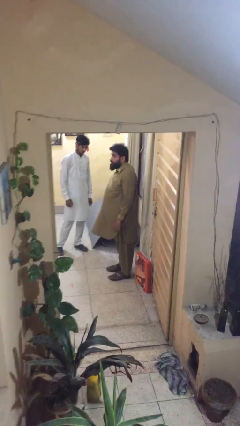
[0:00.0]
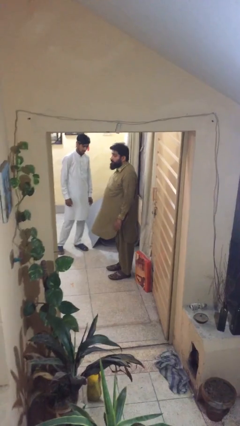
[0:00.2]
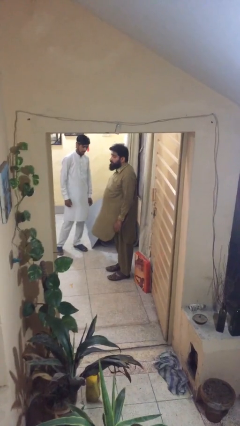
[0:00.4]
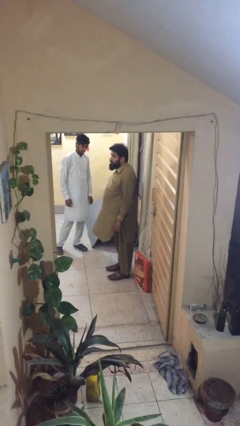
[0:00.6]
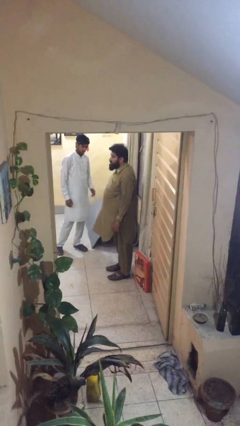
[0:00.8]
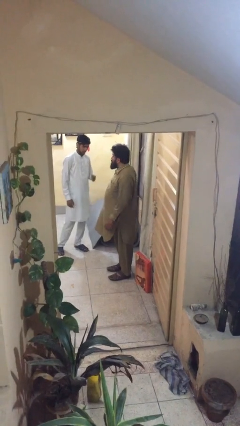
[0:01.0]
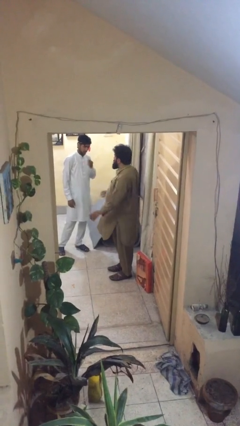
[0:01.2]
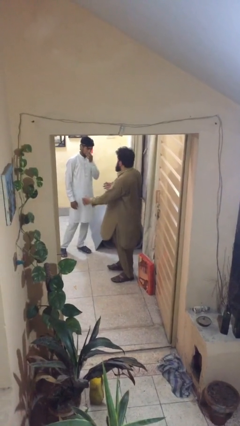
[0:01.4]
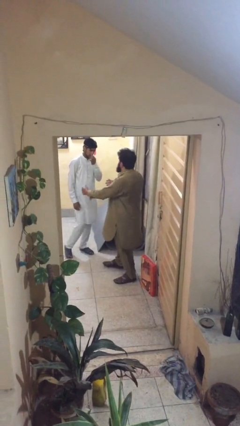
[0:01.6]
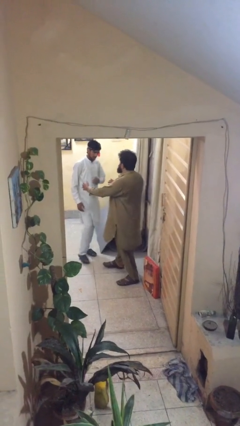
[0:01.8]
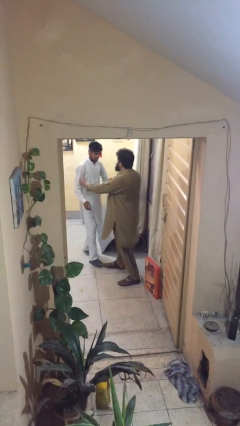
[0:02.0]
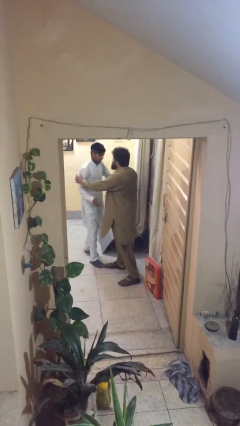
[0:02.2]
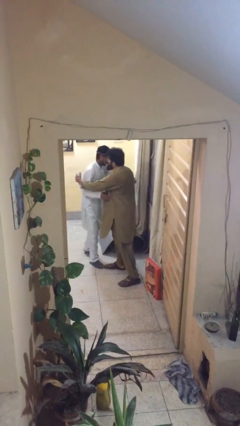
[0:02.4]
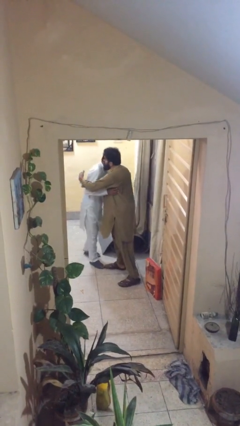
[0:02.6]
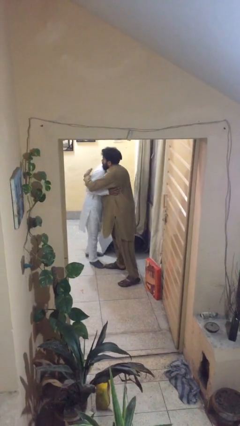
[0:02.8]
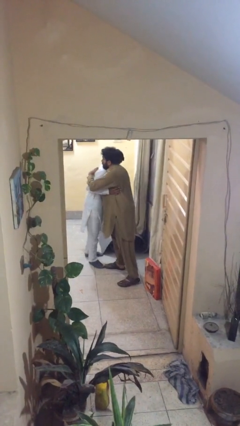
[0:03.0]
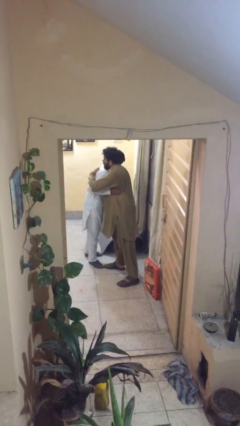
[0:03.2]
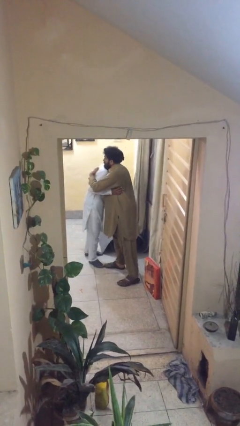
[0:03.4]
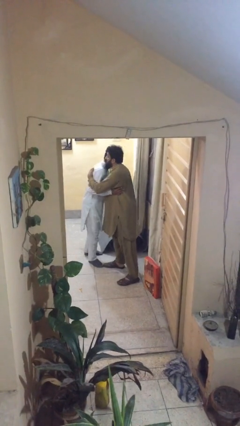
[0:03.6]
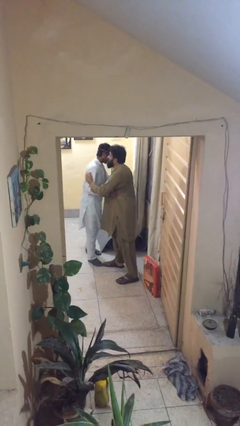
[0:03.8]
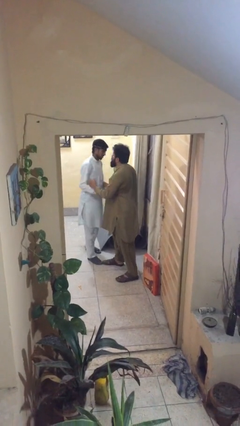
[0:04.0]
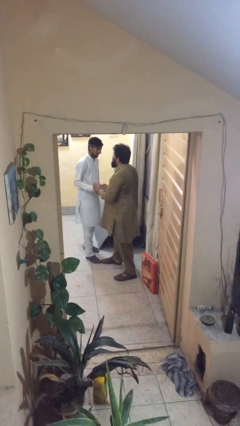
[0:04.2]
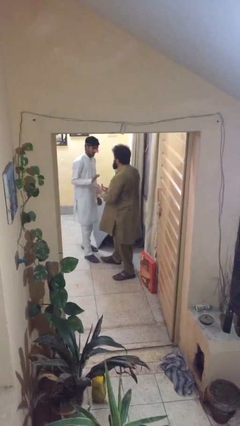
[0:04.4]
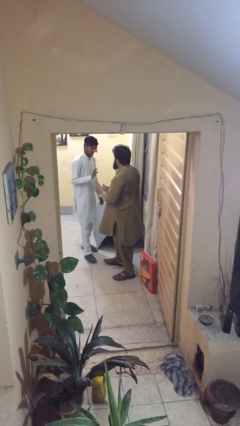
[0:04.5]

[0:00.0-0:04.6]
person embraces person

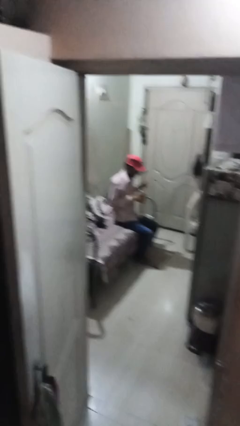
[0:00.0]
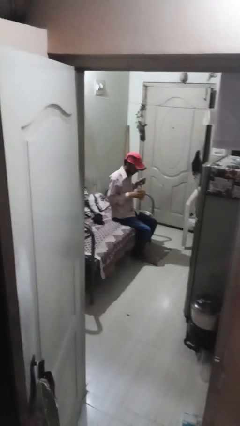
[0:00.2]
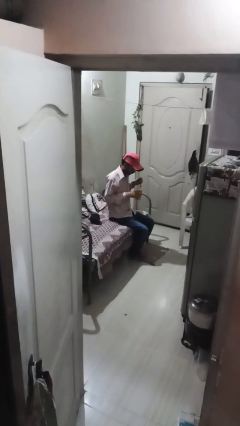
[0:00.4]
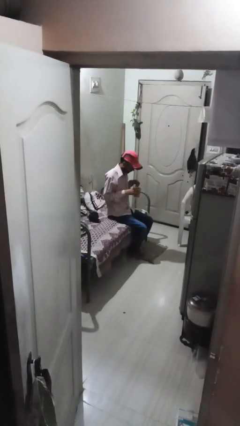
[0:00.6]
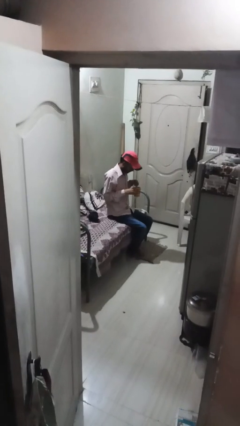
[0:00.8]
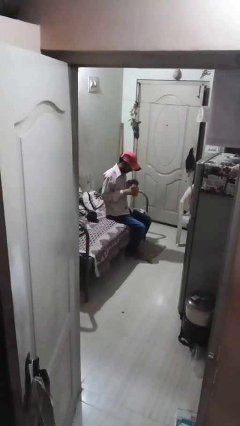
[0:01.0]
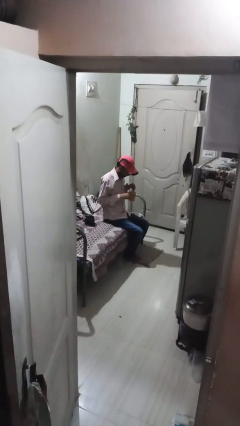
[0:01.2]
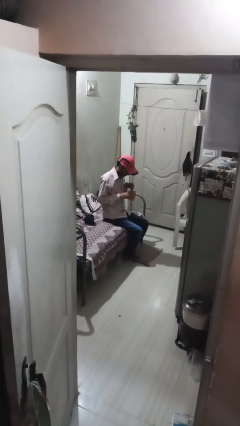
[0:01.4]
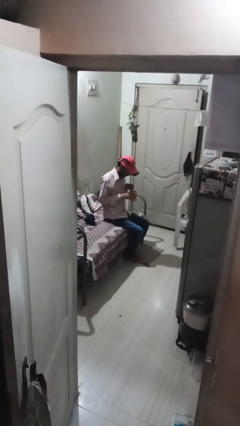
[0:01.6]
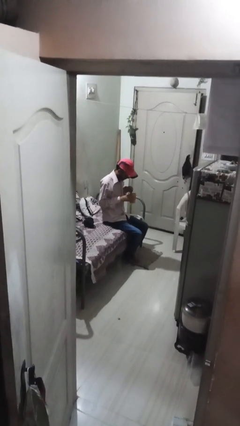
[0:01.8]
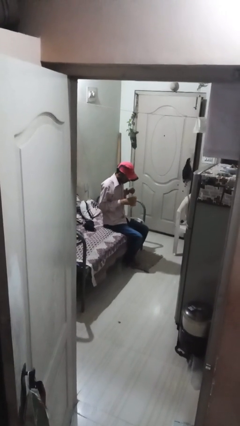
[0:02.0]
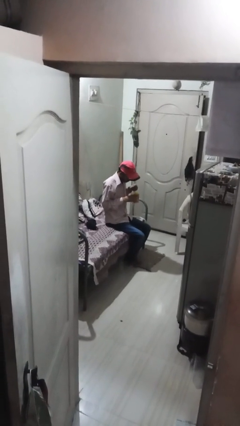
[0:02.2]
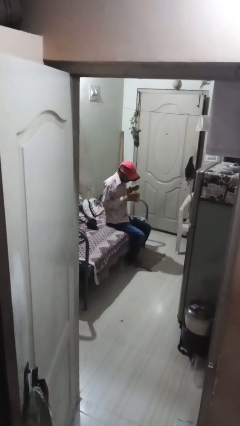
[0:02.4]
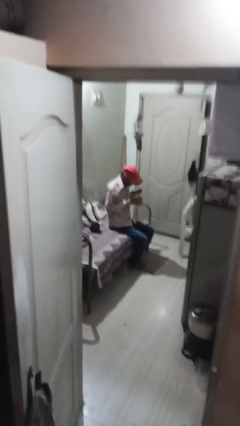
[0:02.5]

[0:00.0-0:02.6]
person stirs mug

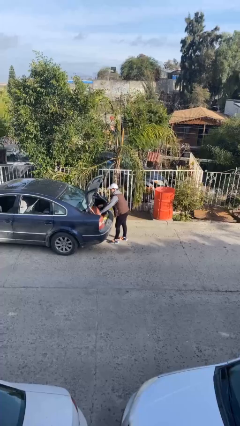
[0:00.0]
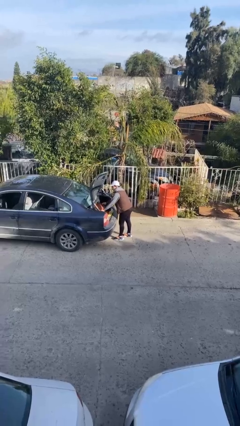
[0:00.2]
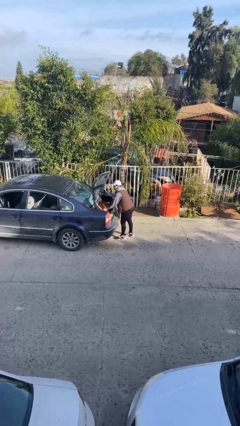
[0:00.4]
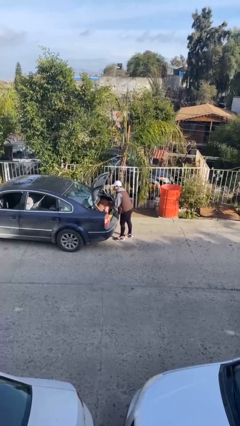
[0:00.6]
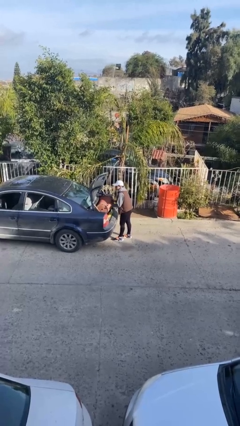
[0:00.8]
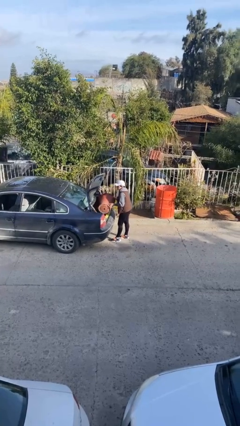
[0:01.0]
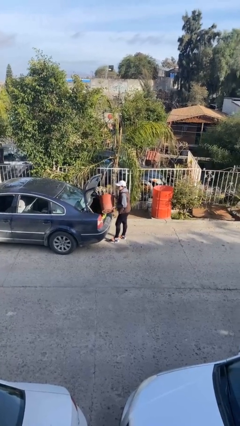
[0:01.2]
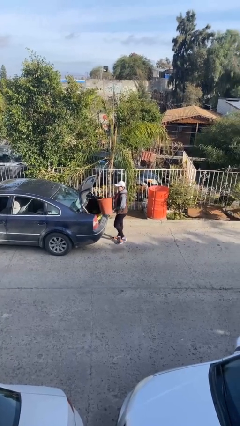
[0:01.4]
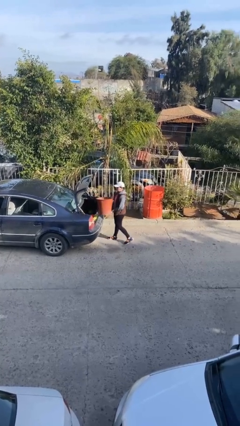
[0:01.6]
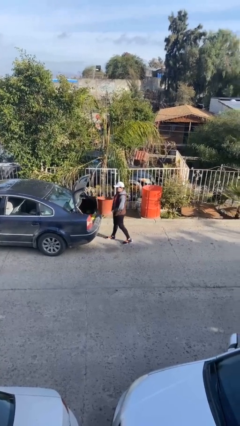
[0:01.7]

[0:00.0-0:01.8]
person unloads car

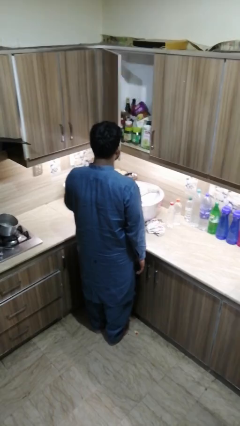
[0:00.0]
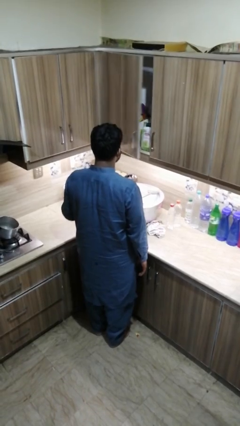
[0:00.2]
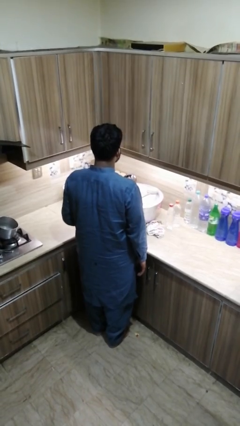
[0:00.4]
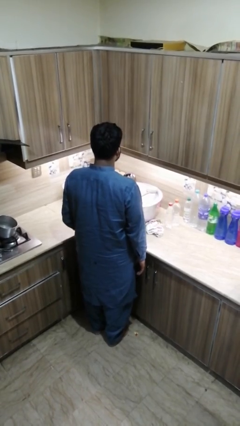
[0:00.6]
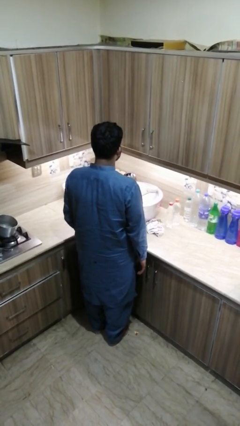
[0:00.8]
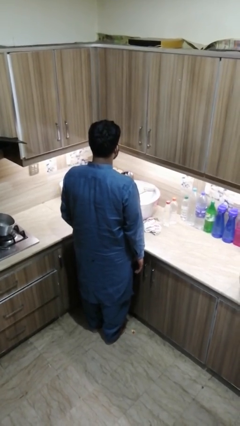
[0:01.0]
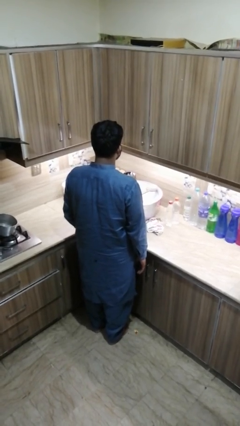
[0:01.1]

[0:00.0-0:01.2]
person closes kitchen drawer

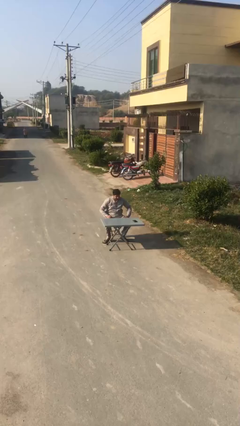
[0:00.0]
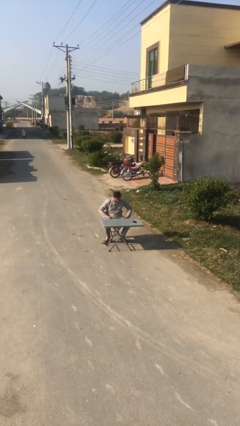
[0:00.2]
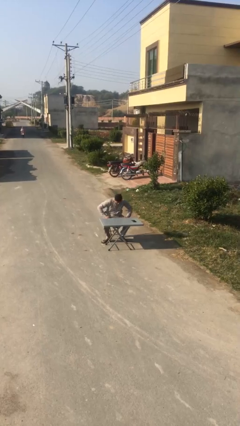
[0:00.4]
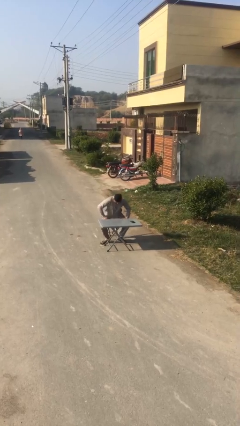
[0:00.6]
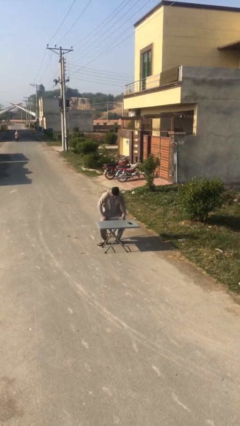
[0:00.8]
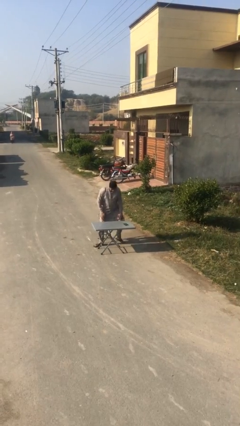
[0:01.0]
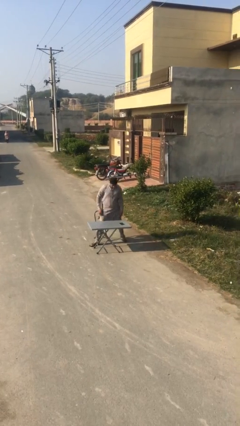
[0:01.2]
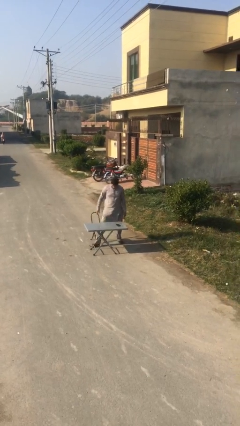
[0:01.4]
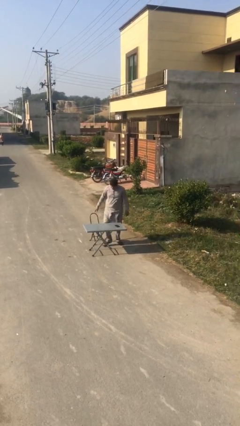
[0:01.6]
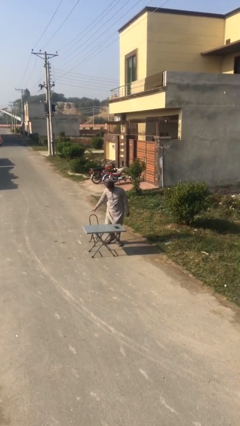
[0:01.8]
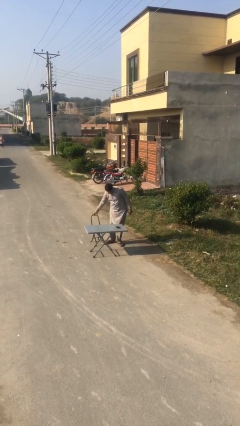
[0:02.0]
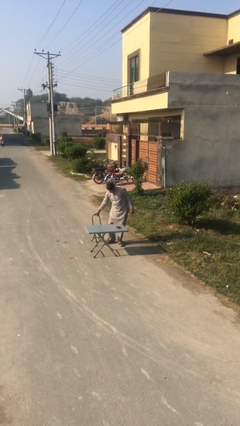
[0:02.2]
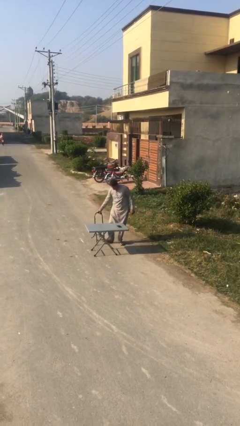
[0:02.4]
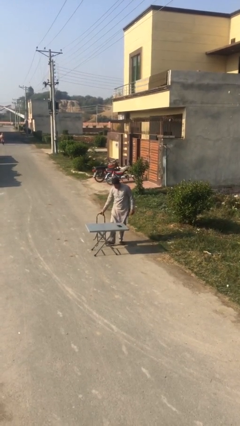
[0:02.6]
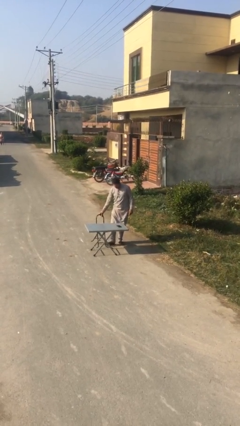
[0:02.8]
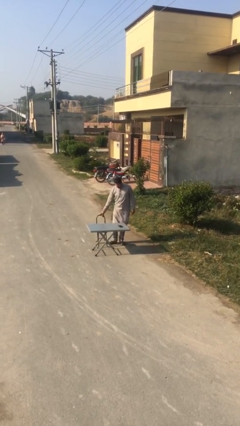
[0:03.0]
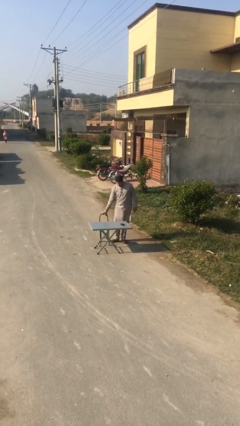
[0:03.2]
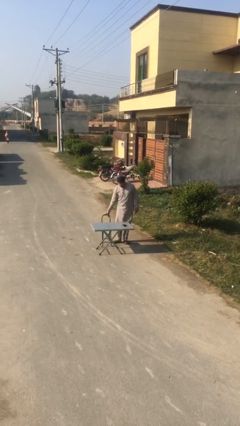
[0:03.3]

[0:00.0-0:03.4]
person stands up

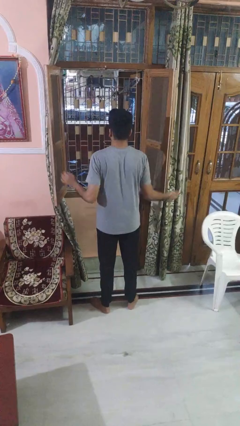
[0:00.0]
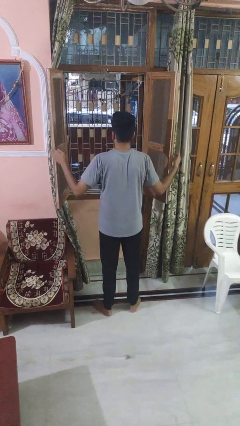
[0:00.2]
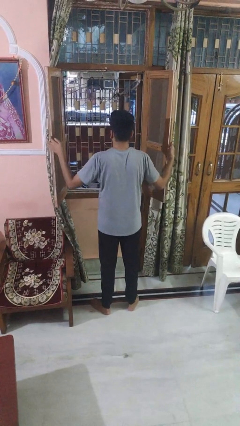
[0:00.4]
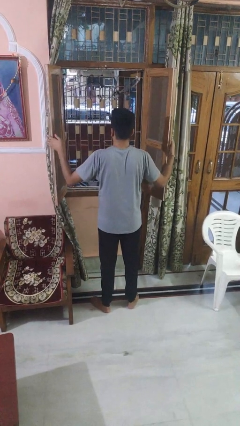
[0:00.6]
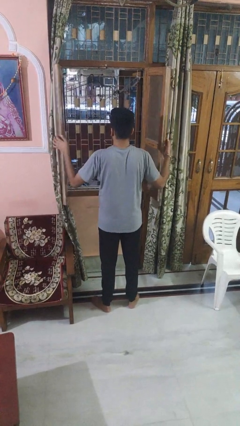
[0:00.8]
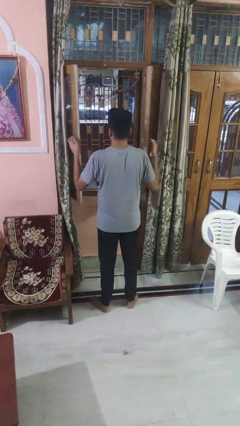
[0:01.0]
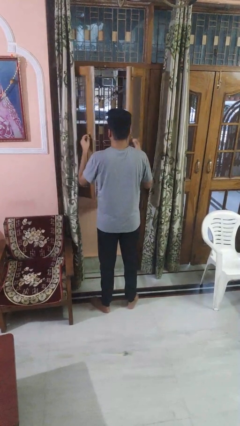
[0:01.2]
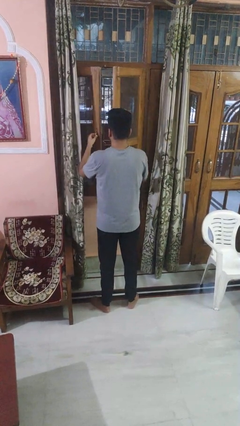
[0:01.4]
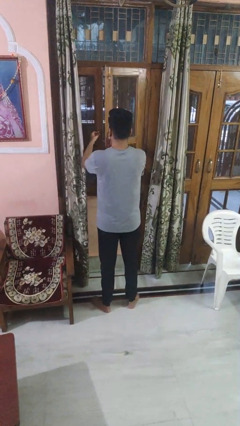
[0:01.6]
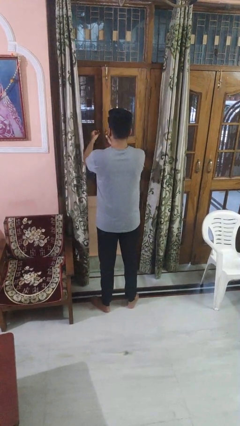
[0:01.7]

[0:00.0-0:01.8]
person closes home window

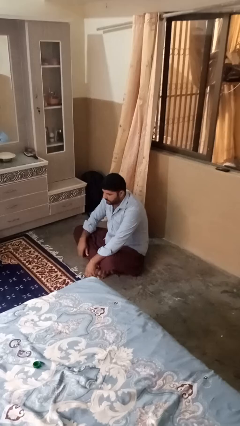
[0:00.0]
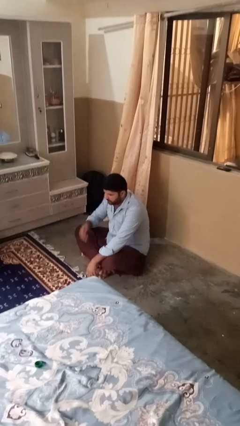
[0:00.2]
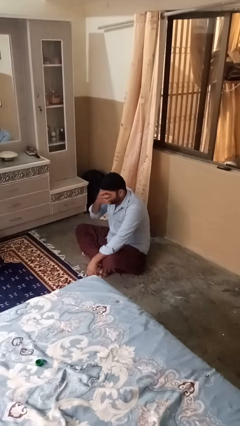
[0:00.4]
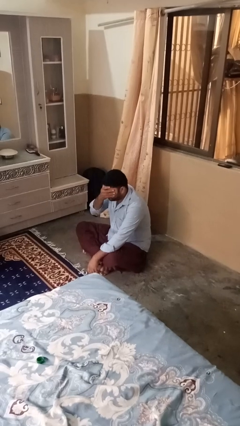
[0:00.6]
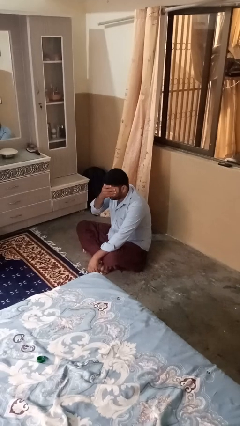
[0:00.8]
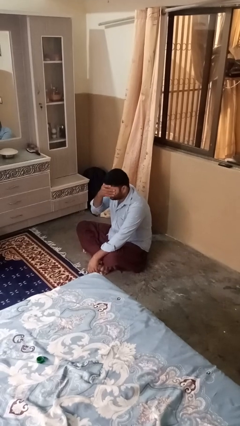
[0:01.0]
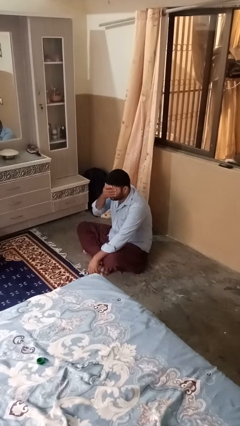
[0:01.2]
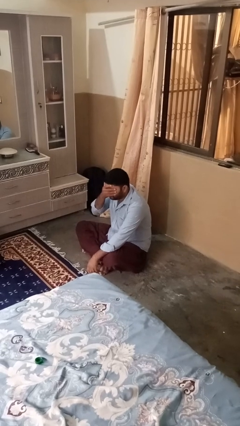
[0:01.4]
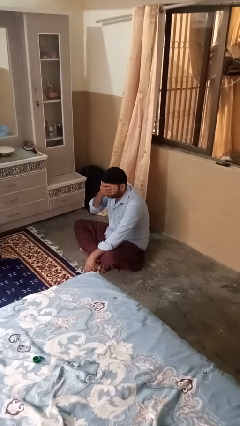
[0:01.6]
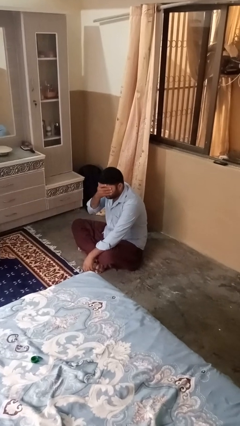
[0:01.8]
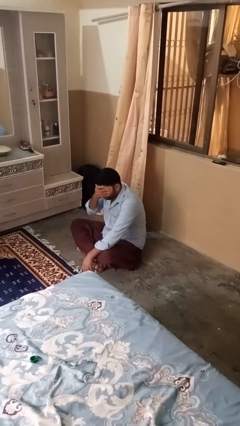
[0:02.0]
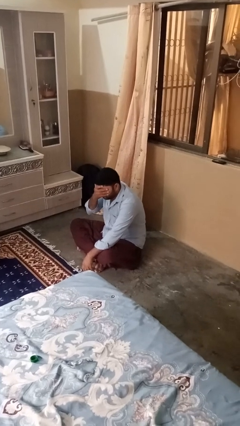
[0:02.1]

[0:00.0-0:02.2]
person covers face with hands
